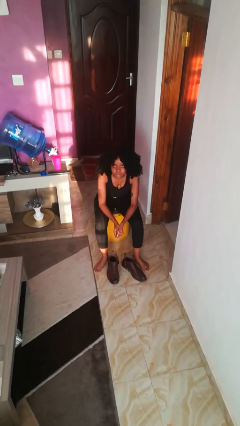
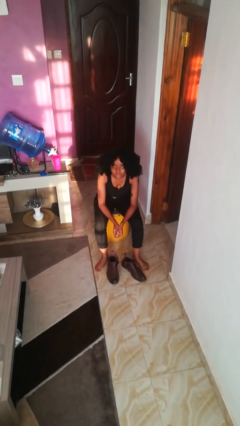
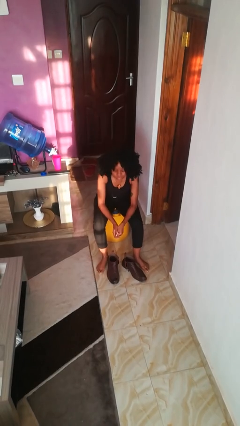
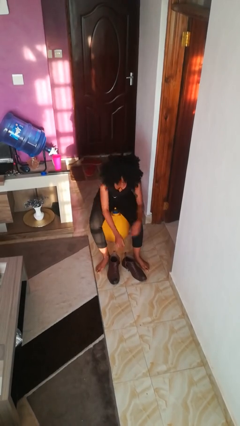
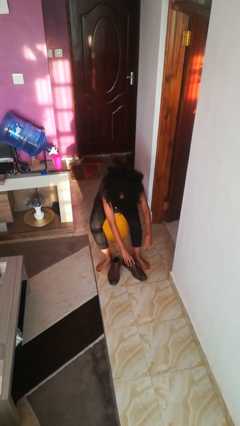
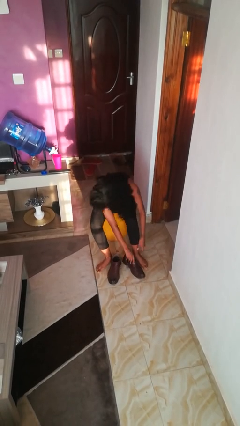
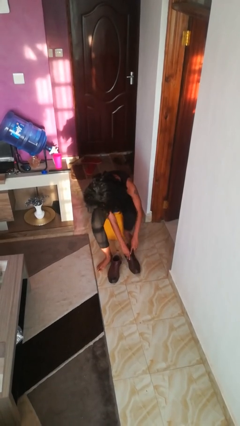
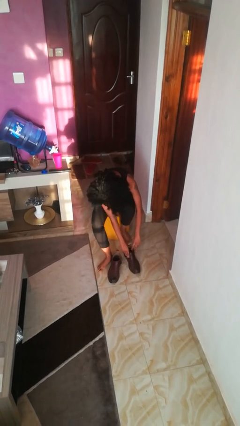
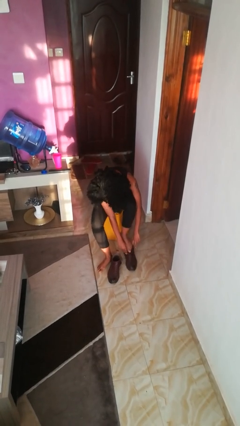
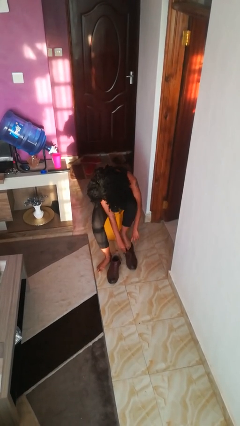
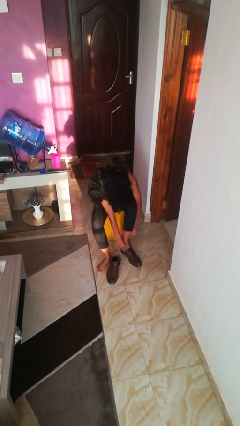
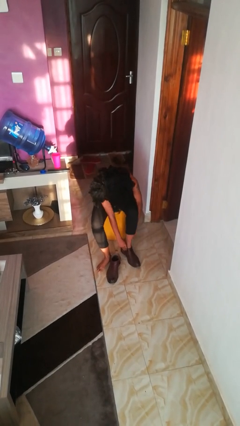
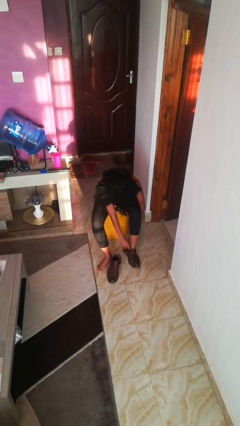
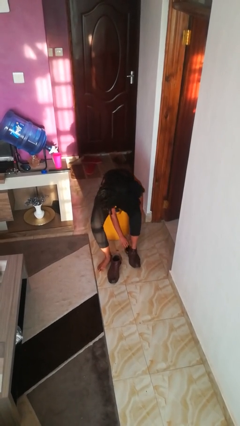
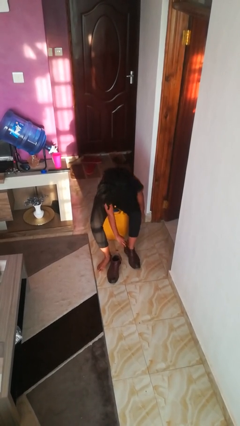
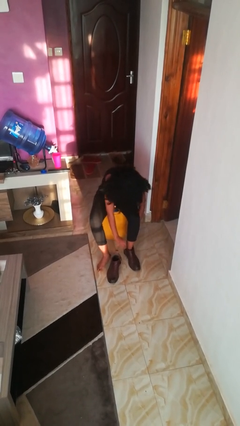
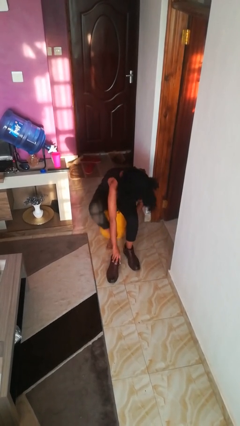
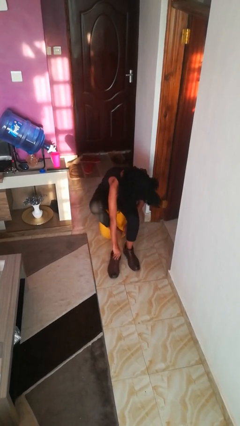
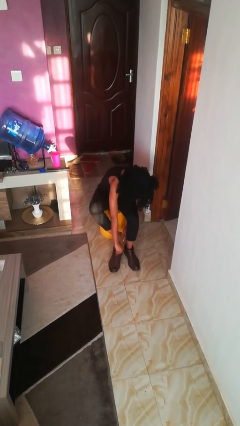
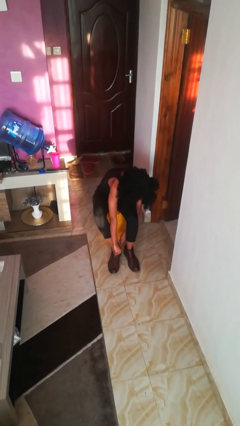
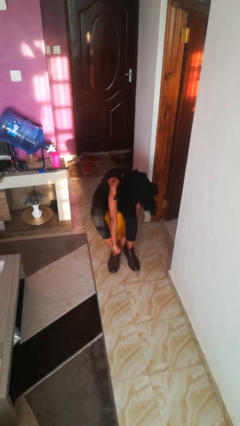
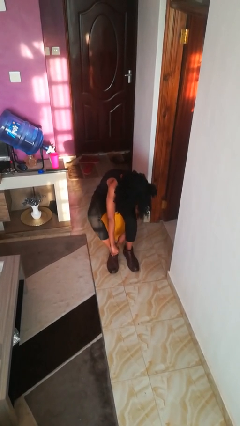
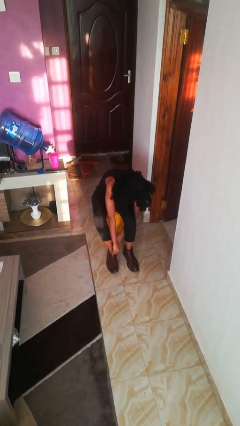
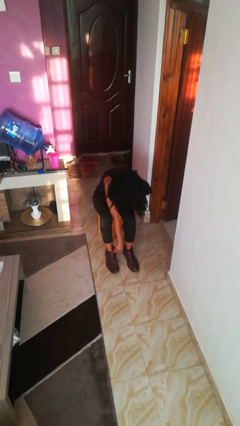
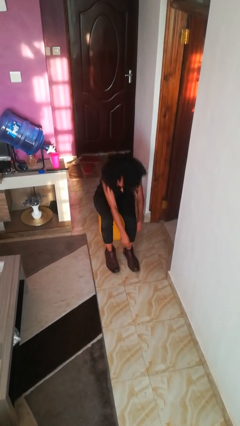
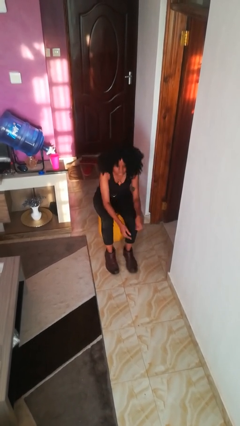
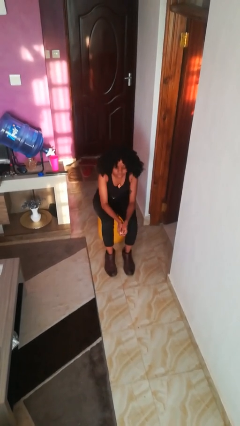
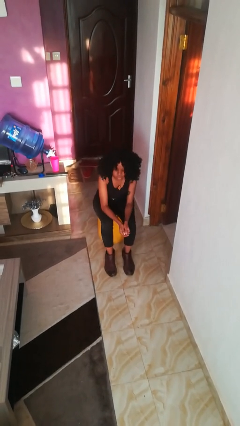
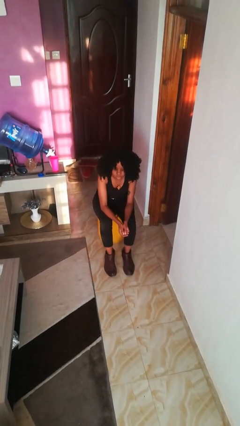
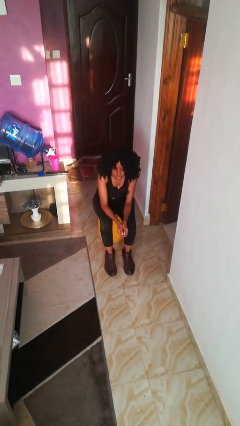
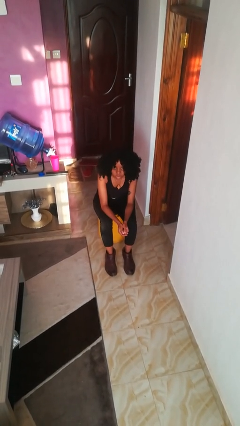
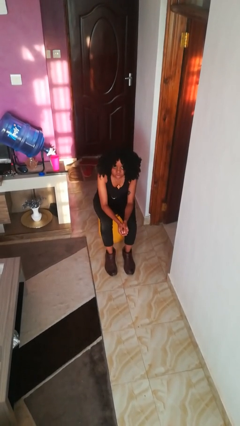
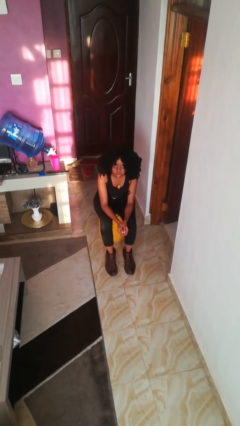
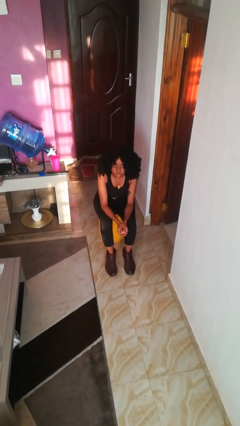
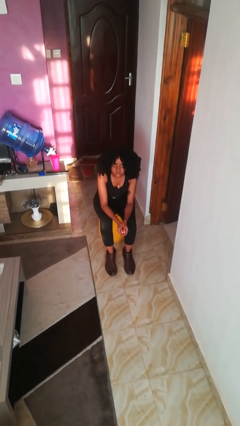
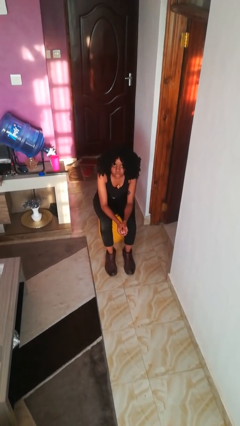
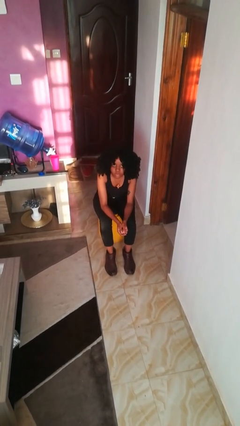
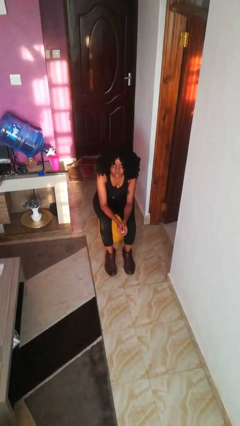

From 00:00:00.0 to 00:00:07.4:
person puts on boots

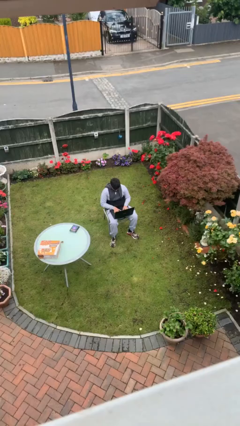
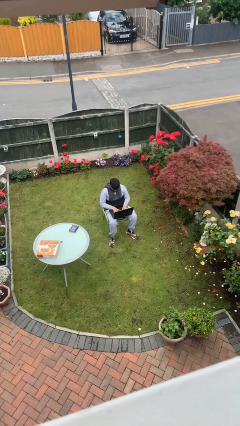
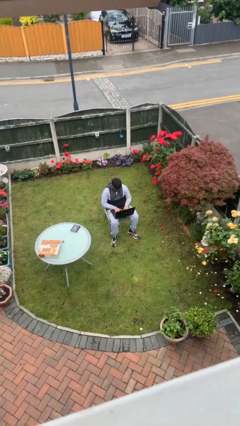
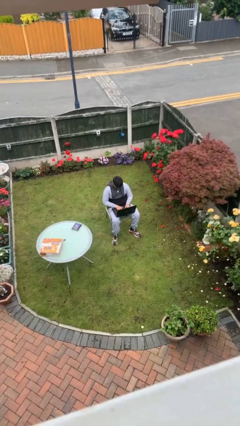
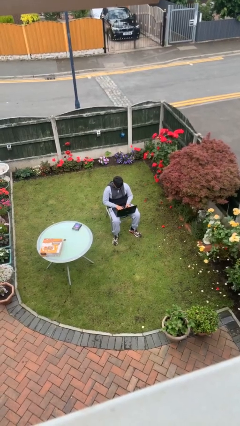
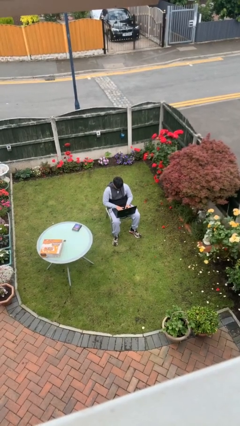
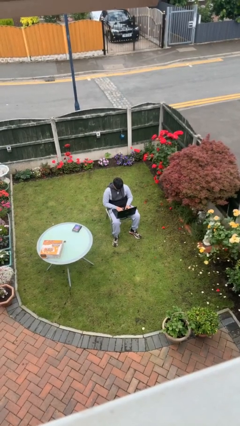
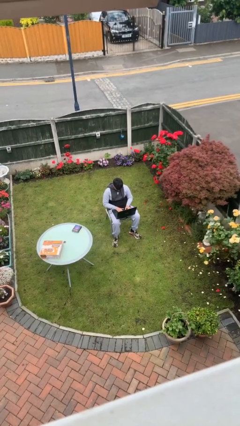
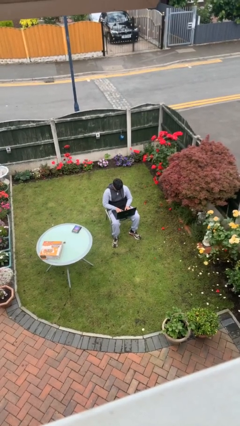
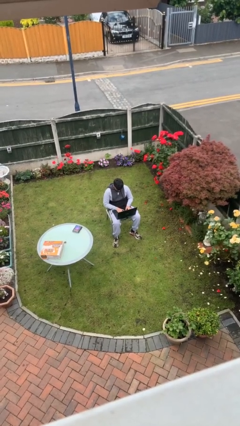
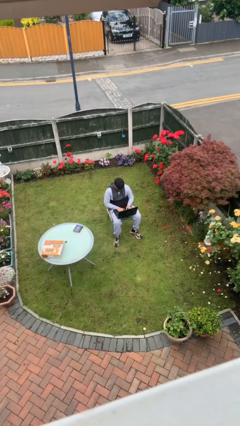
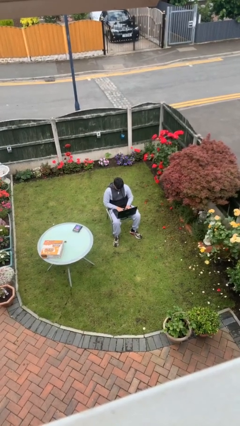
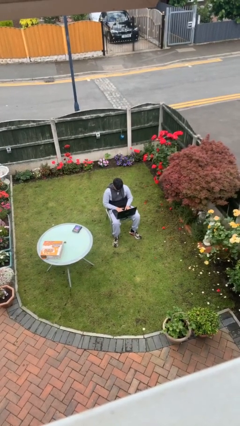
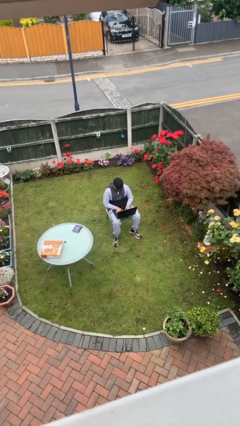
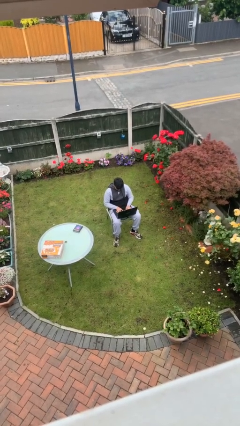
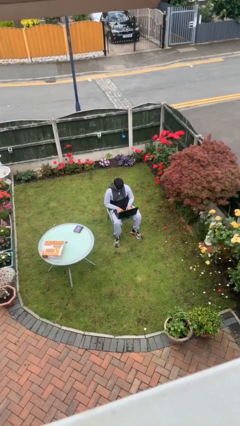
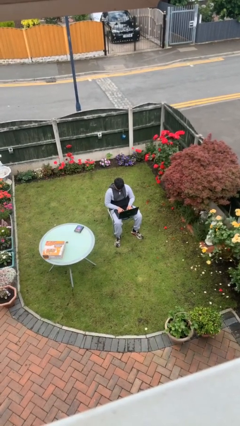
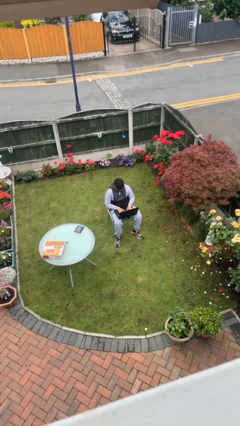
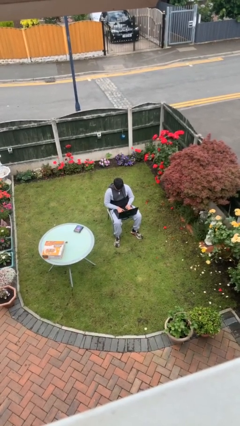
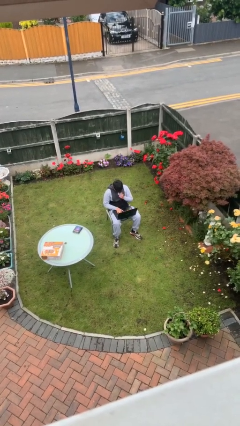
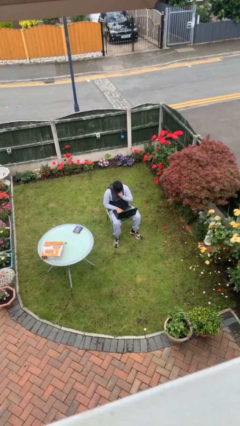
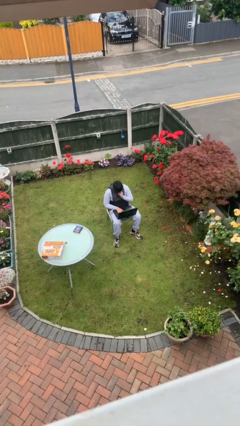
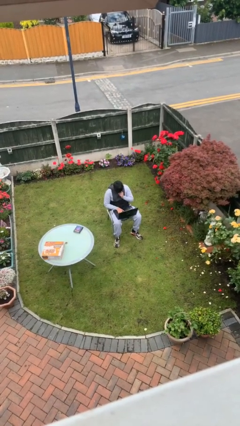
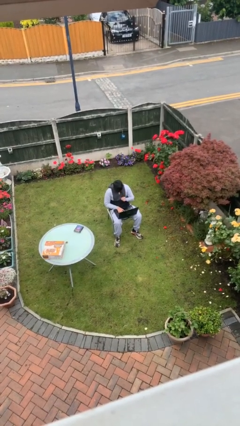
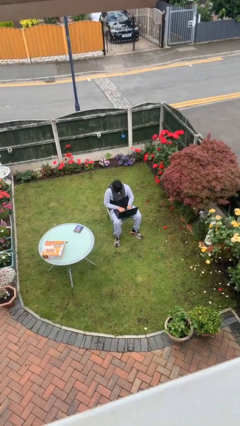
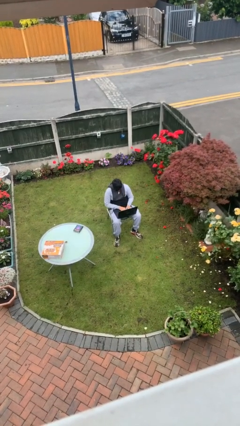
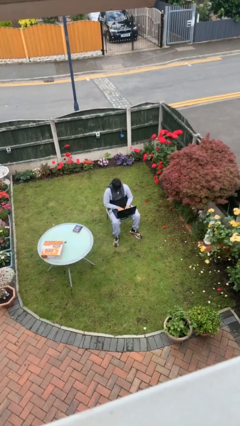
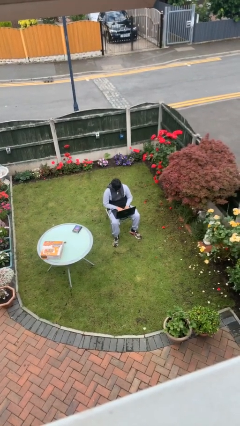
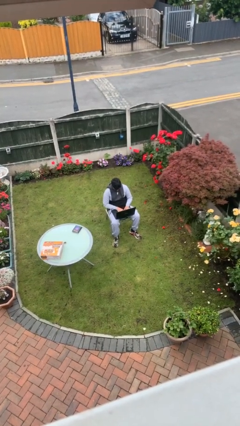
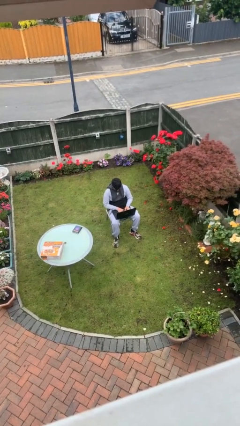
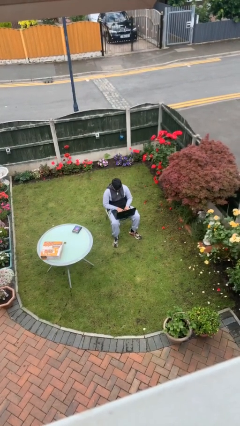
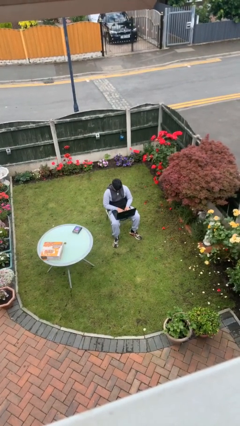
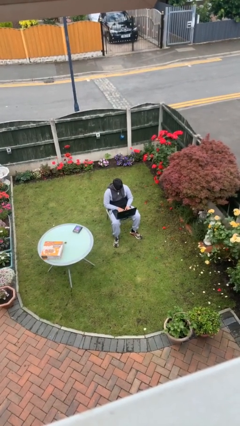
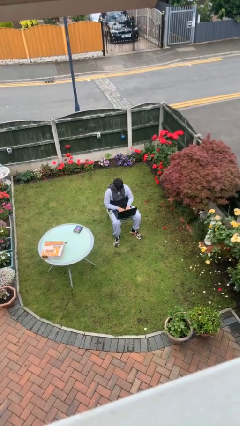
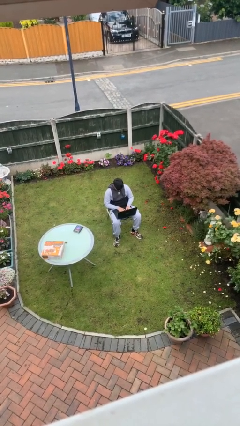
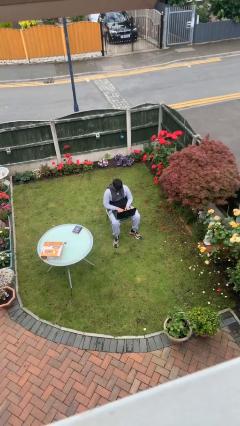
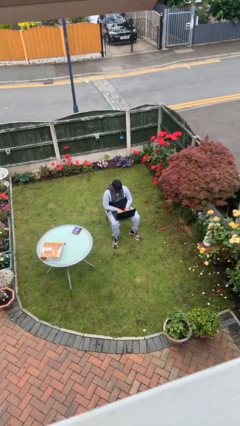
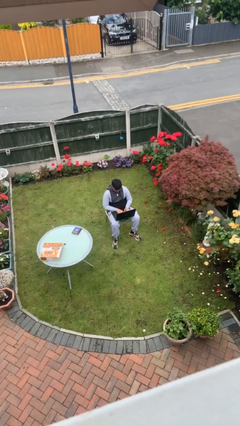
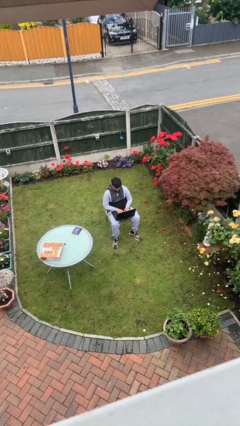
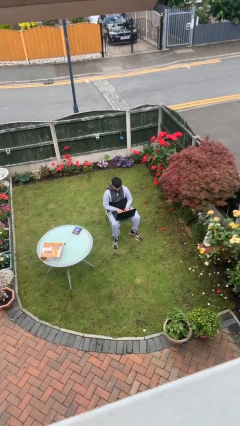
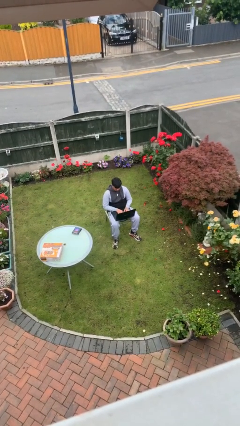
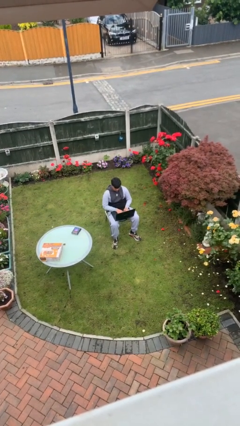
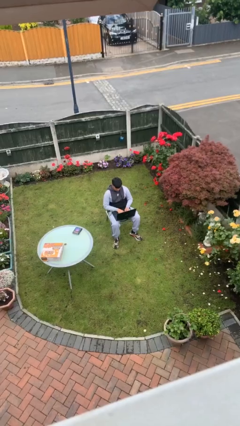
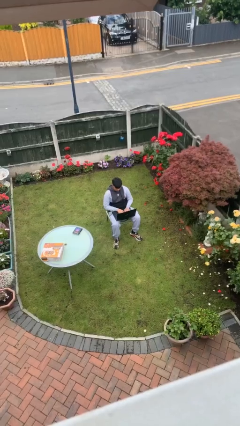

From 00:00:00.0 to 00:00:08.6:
person interacts with laptop

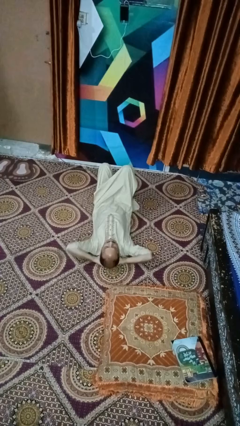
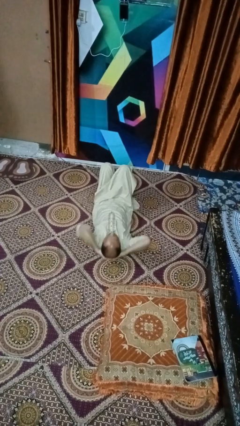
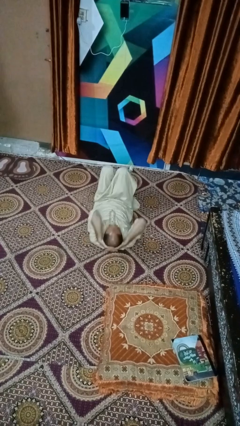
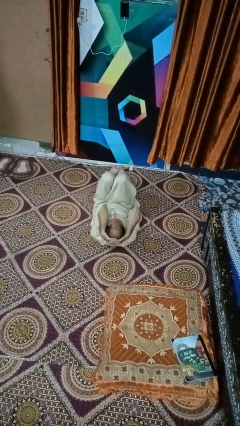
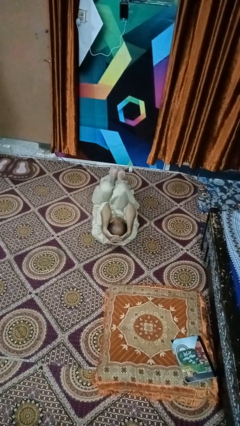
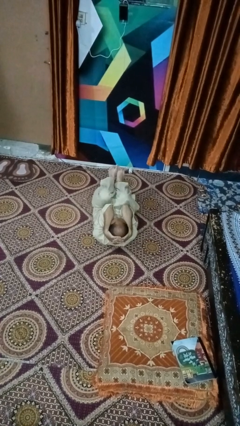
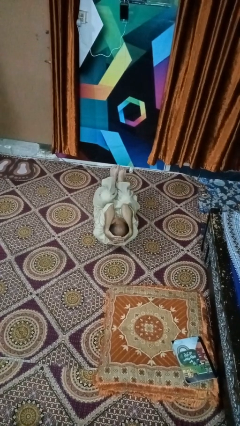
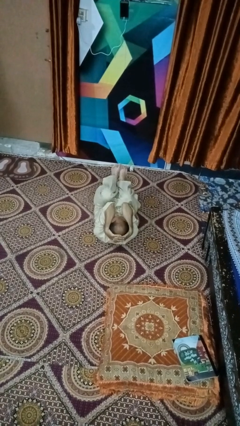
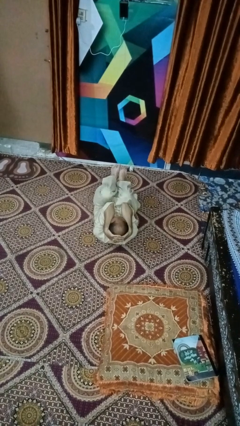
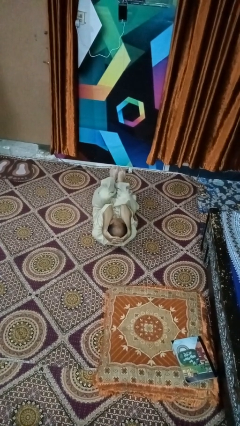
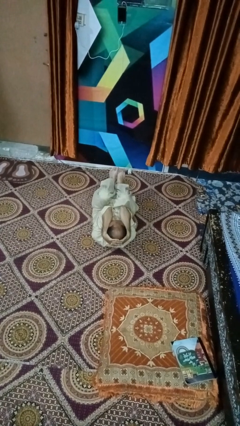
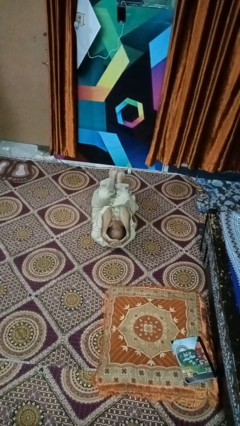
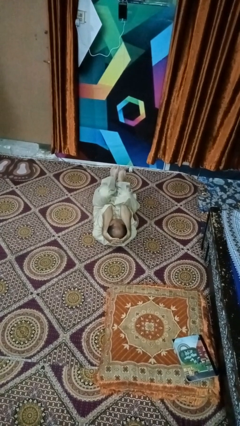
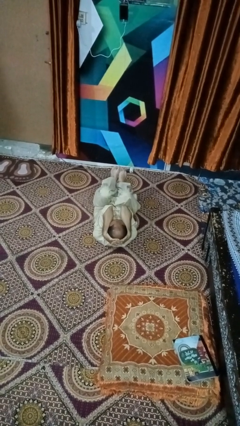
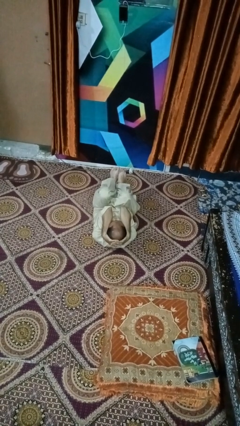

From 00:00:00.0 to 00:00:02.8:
person exercises with situp
